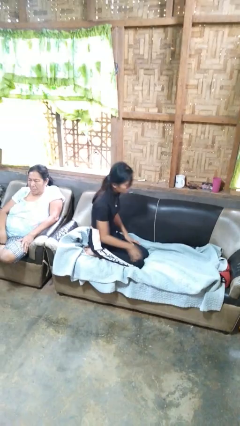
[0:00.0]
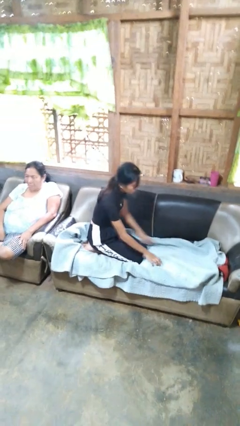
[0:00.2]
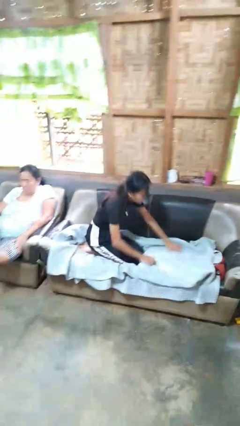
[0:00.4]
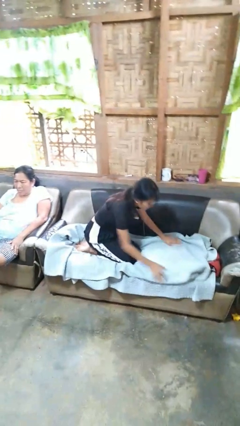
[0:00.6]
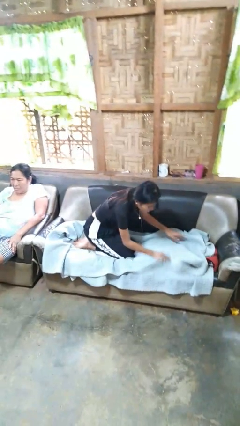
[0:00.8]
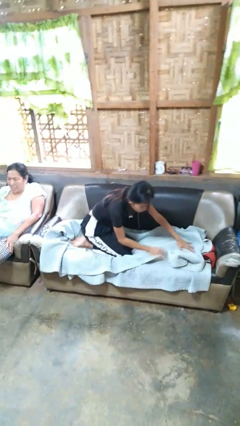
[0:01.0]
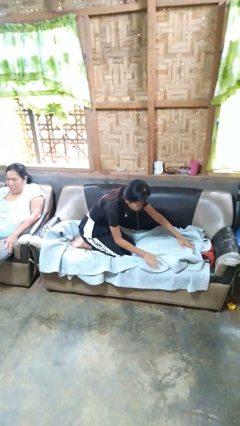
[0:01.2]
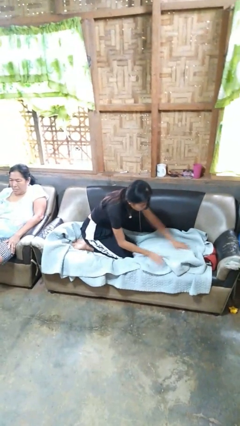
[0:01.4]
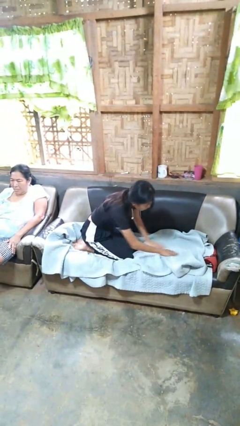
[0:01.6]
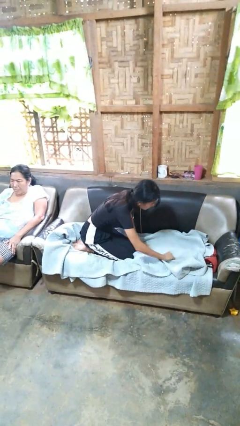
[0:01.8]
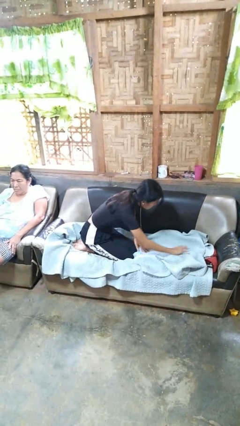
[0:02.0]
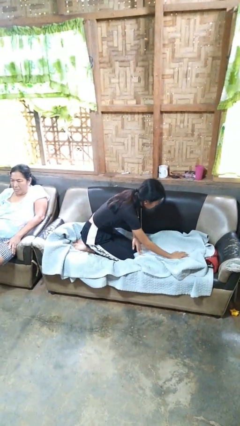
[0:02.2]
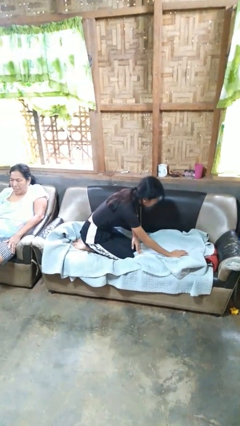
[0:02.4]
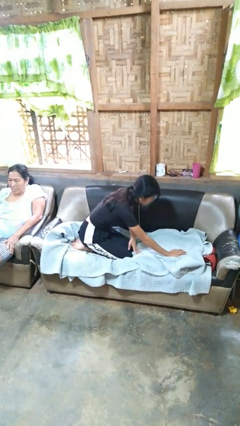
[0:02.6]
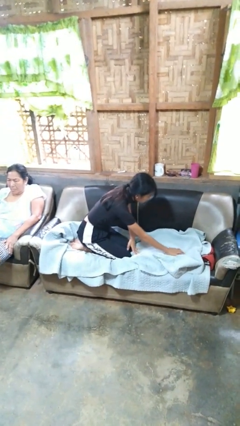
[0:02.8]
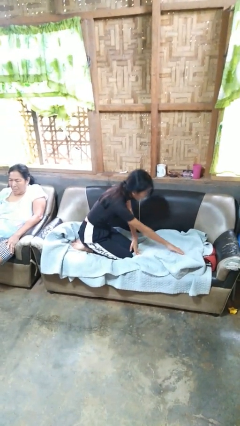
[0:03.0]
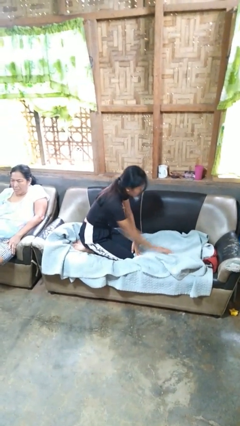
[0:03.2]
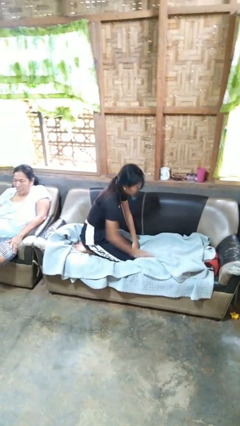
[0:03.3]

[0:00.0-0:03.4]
person searches in couch

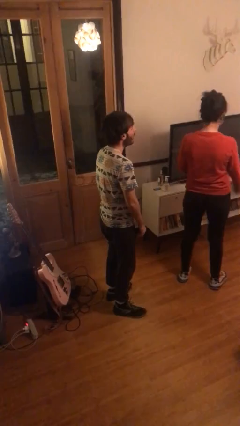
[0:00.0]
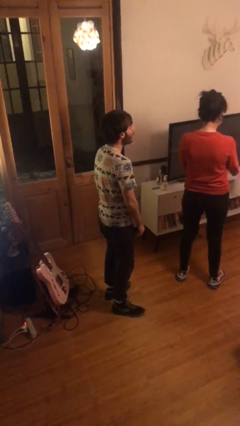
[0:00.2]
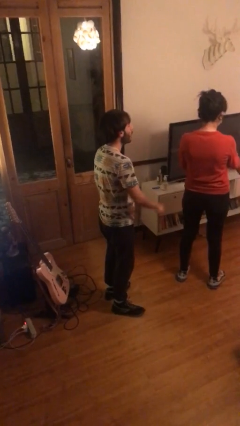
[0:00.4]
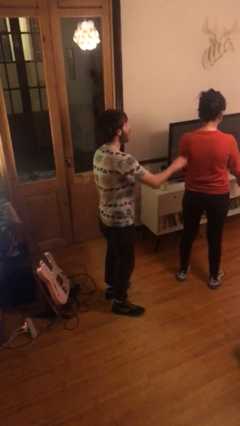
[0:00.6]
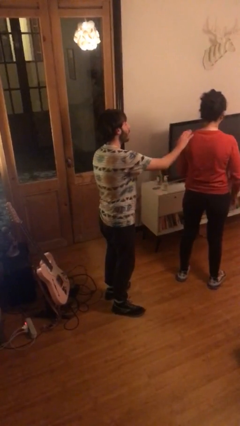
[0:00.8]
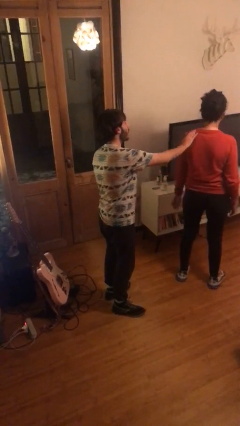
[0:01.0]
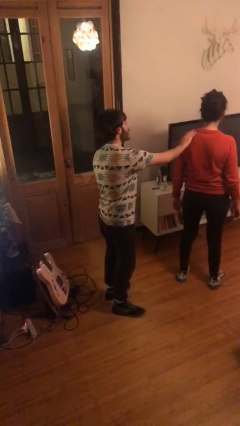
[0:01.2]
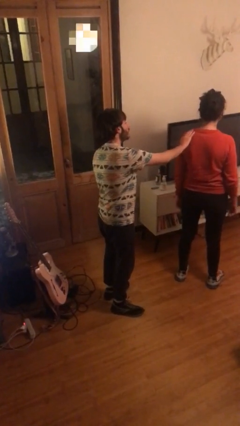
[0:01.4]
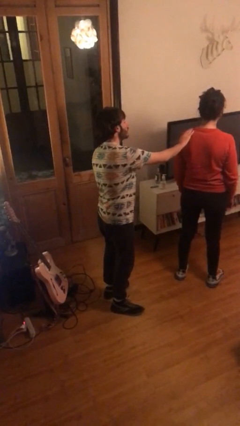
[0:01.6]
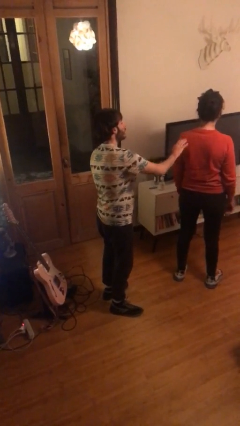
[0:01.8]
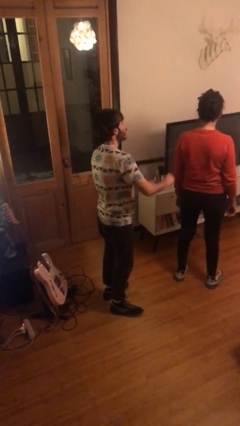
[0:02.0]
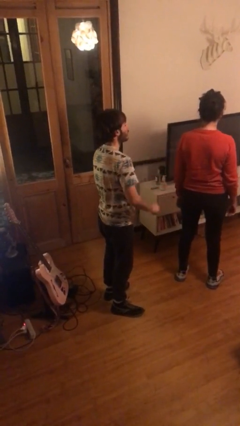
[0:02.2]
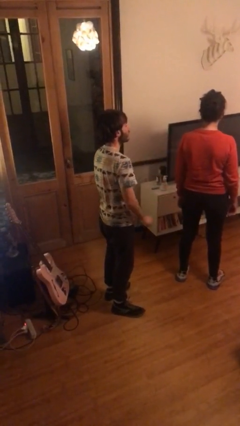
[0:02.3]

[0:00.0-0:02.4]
person touches back of person

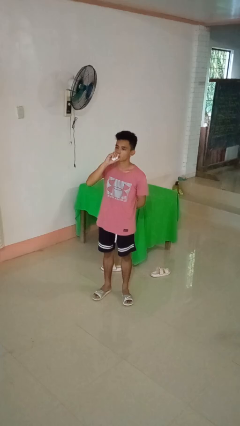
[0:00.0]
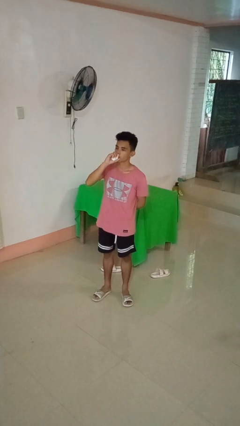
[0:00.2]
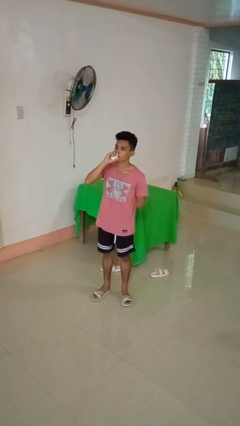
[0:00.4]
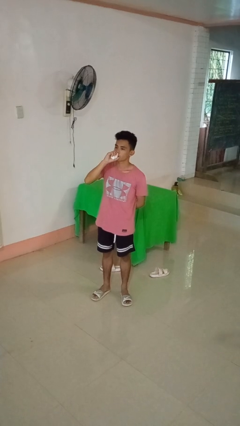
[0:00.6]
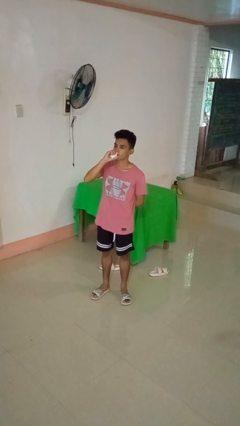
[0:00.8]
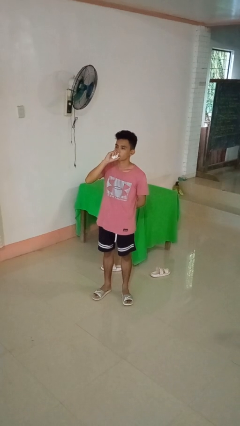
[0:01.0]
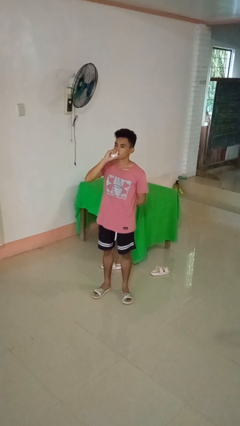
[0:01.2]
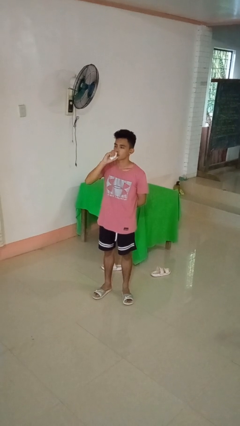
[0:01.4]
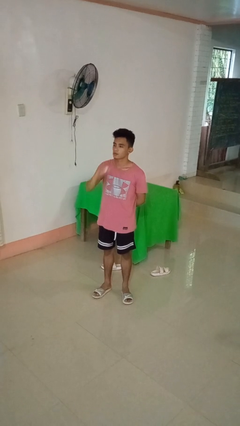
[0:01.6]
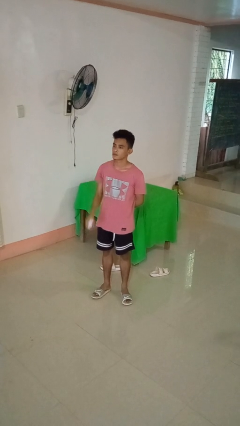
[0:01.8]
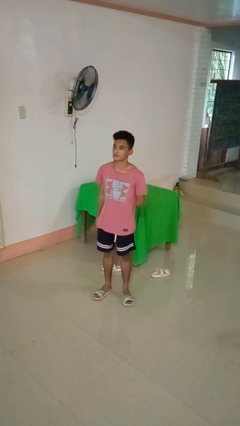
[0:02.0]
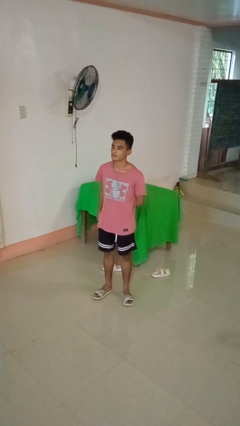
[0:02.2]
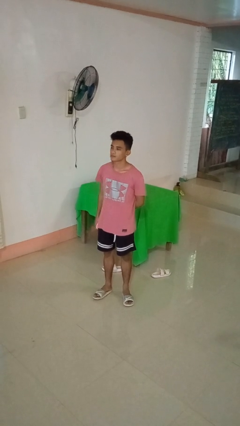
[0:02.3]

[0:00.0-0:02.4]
person vapes

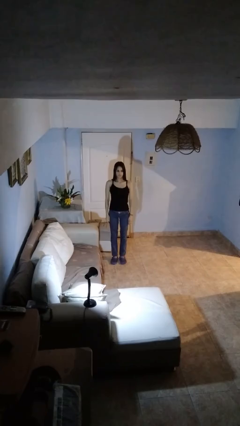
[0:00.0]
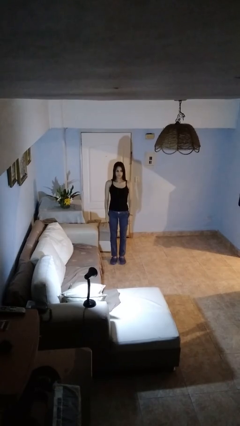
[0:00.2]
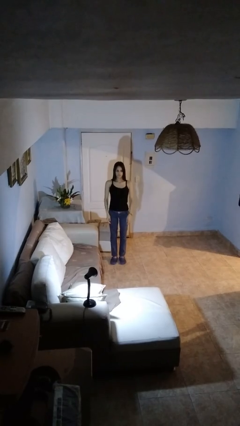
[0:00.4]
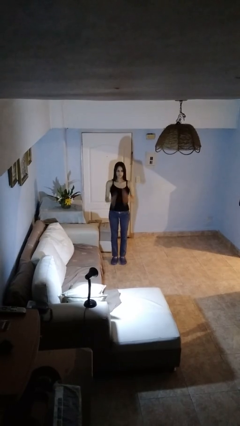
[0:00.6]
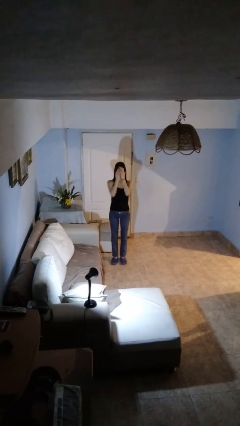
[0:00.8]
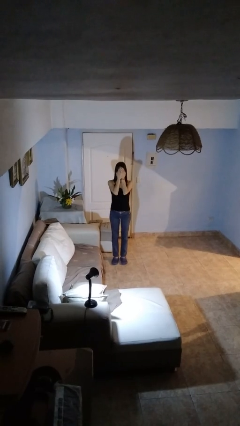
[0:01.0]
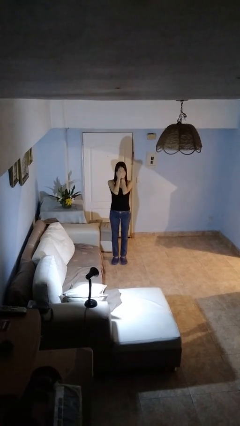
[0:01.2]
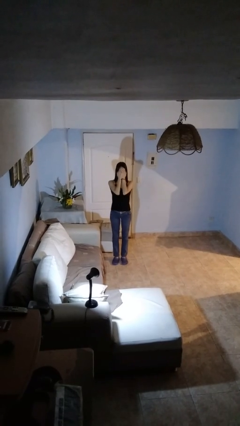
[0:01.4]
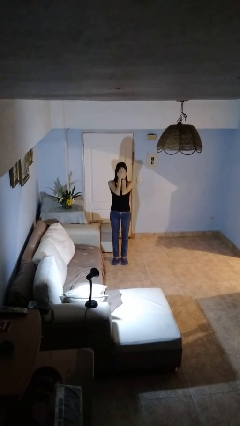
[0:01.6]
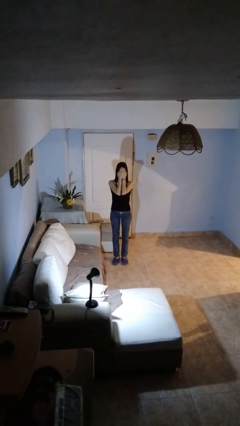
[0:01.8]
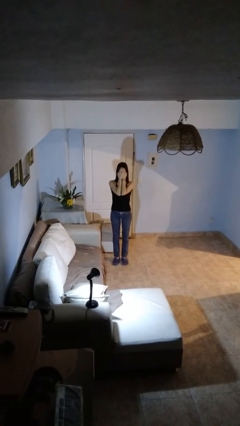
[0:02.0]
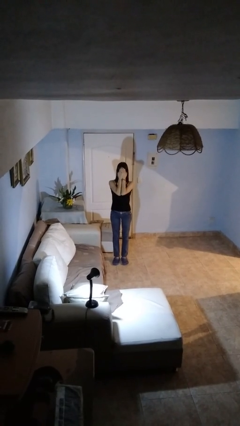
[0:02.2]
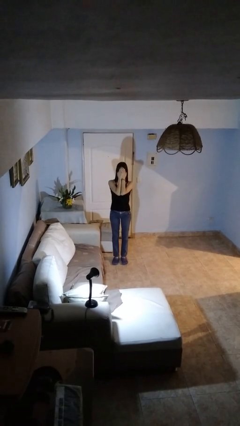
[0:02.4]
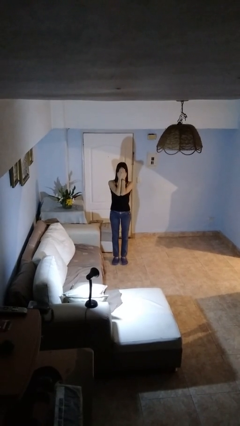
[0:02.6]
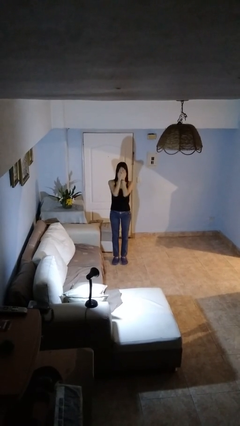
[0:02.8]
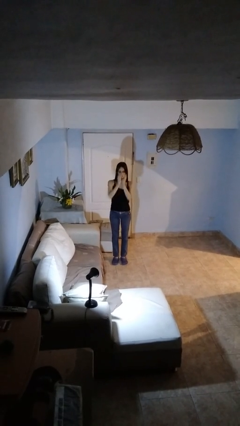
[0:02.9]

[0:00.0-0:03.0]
person covers face with hands

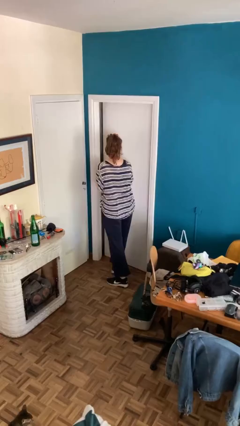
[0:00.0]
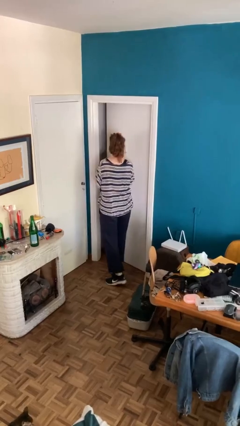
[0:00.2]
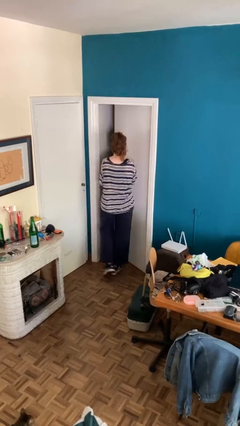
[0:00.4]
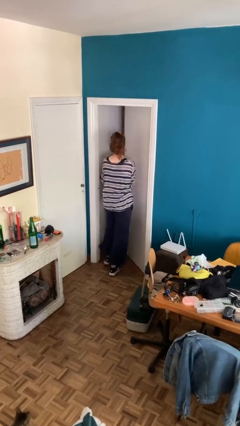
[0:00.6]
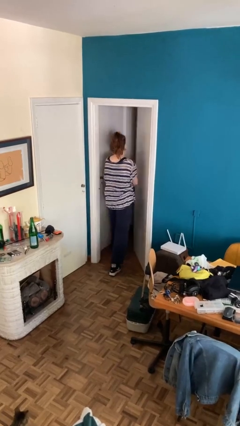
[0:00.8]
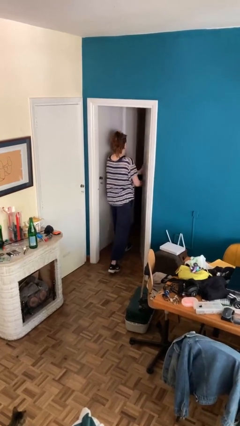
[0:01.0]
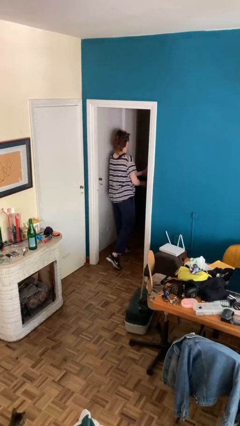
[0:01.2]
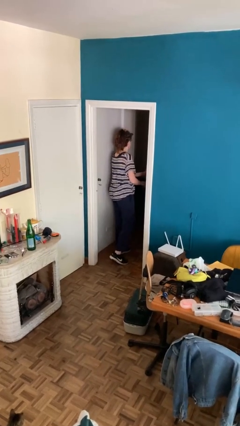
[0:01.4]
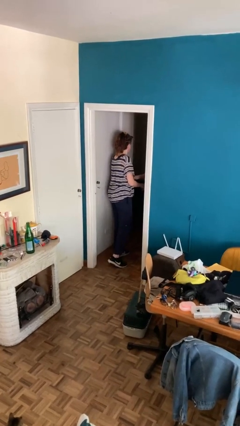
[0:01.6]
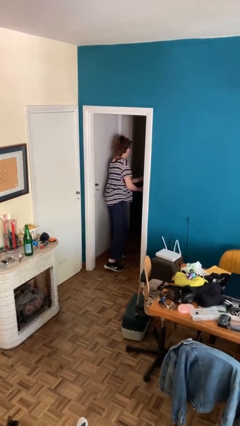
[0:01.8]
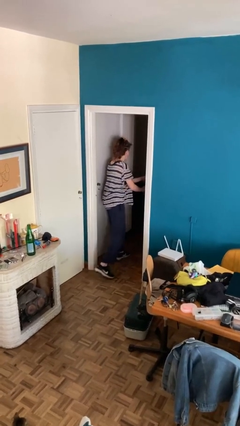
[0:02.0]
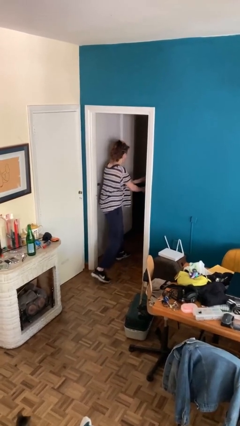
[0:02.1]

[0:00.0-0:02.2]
person opens facility door

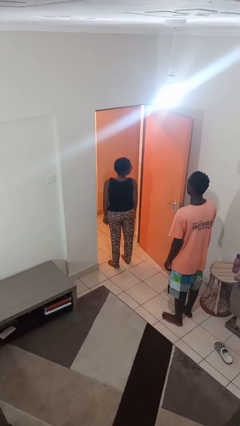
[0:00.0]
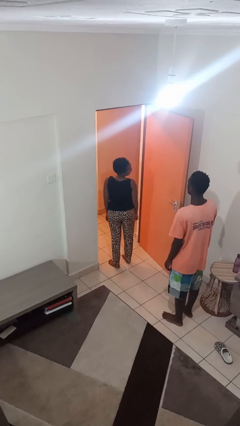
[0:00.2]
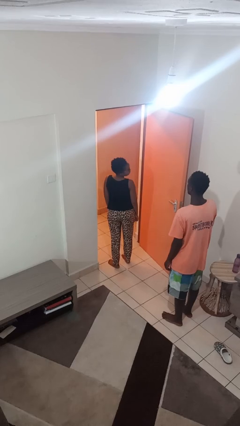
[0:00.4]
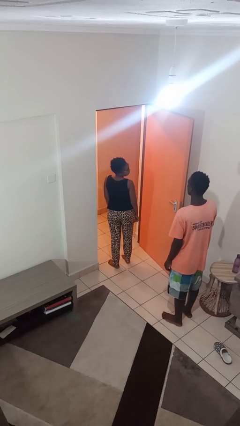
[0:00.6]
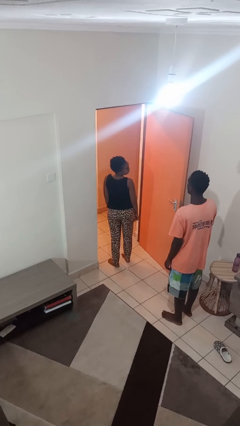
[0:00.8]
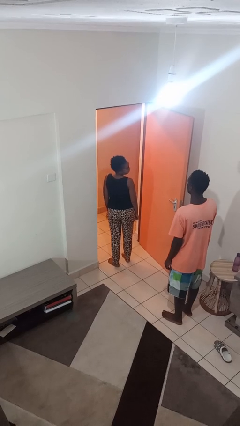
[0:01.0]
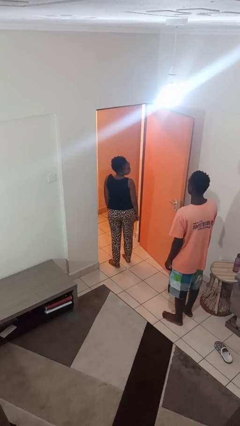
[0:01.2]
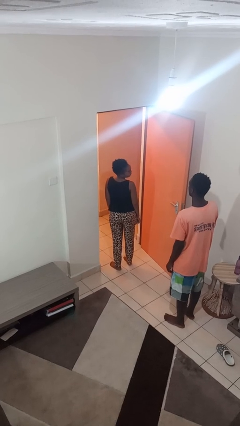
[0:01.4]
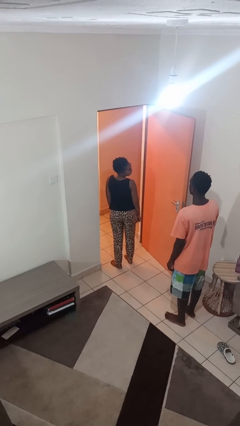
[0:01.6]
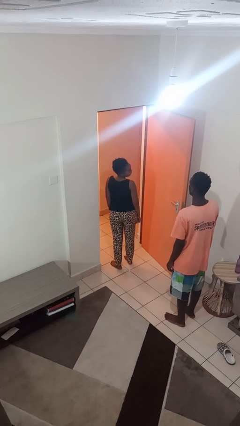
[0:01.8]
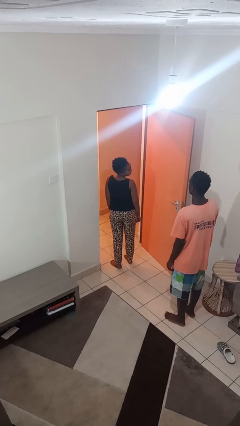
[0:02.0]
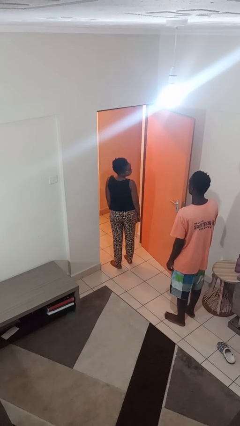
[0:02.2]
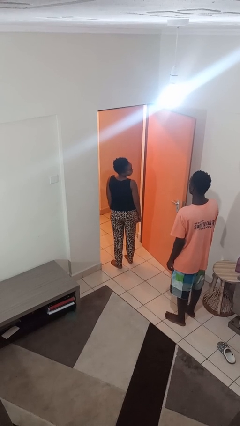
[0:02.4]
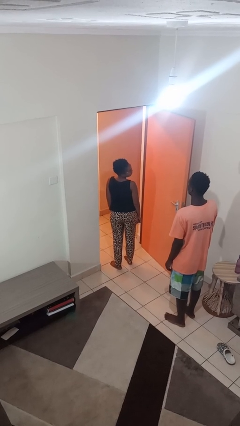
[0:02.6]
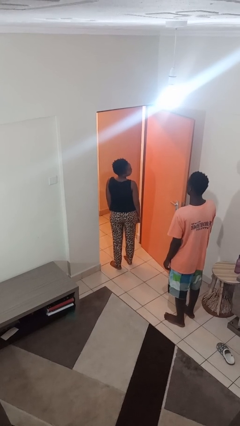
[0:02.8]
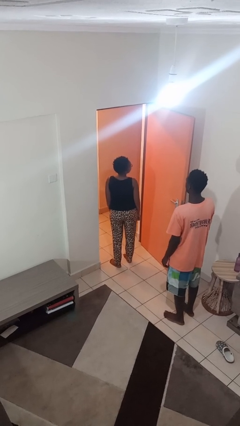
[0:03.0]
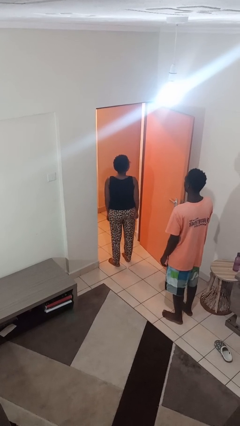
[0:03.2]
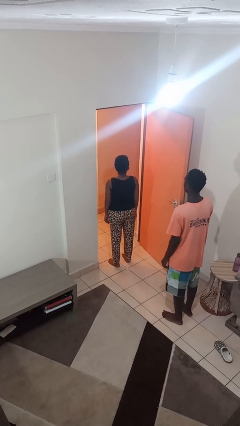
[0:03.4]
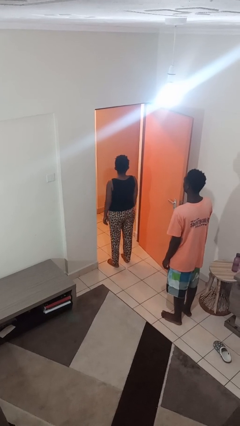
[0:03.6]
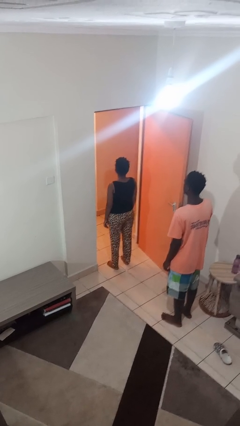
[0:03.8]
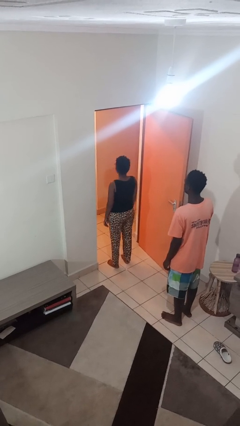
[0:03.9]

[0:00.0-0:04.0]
person looks over shoulder
